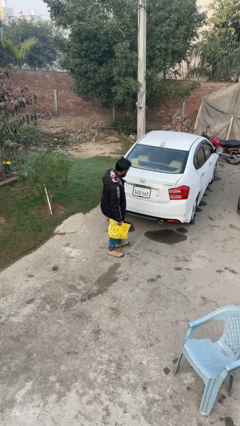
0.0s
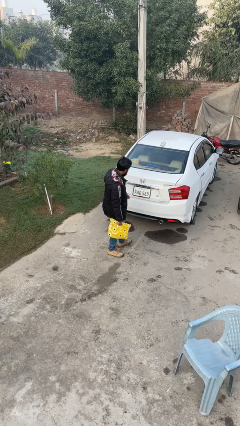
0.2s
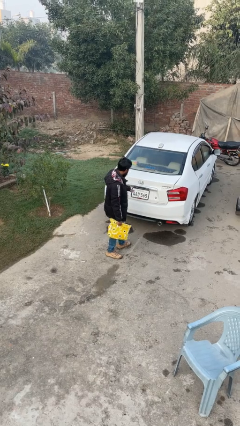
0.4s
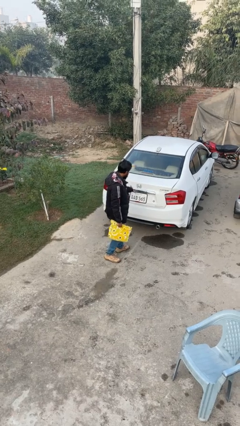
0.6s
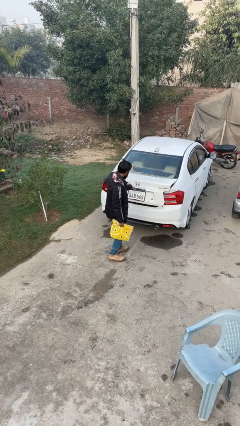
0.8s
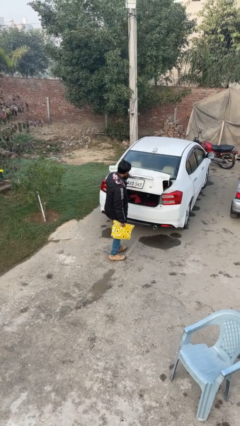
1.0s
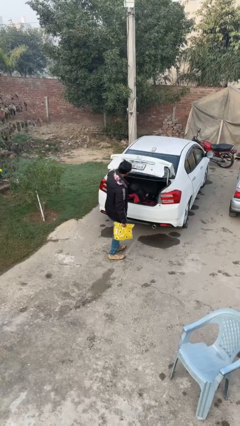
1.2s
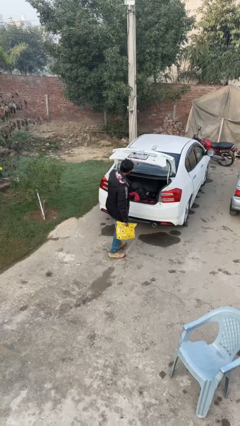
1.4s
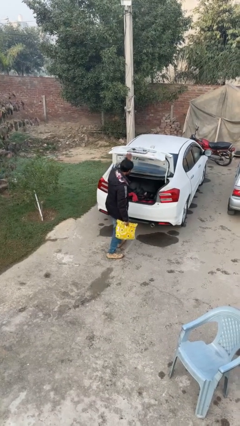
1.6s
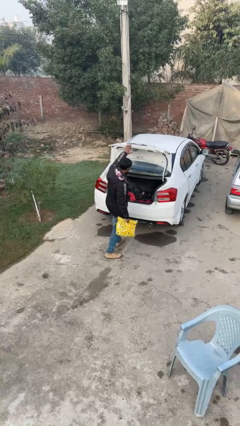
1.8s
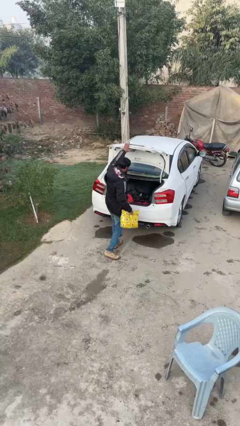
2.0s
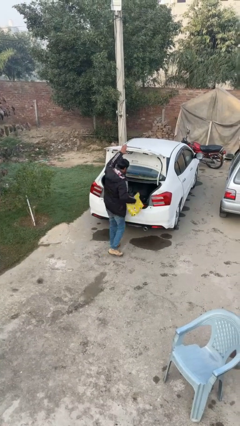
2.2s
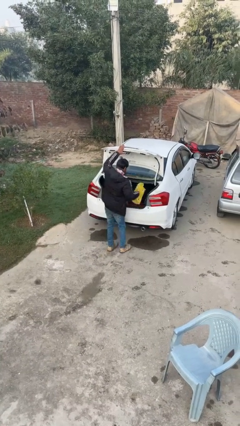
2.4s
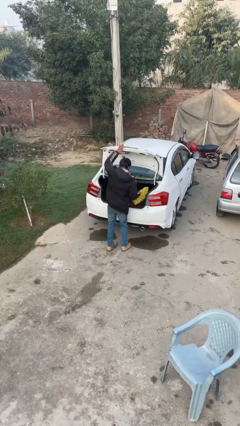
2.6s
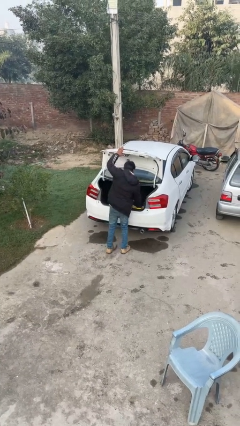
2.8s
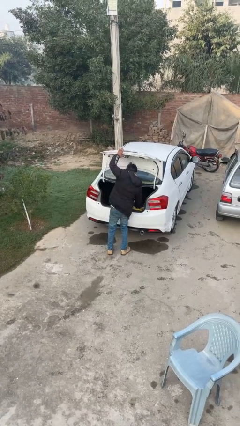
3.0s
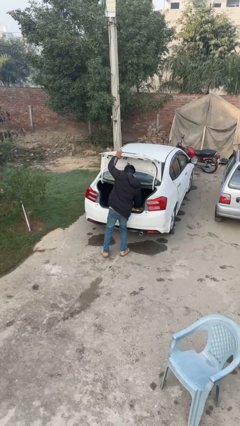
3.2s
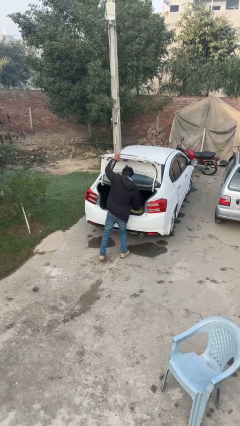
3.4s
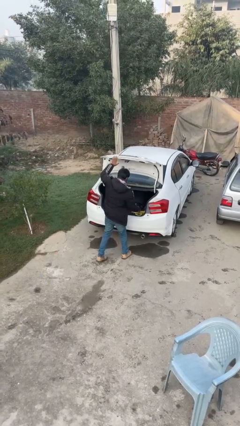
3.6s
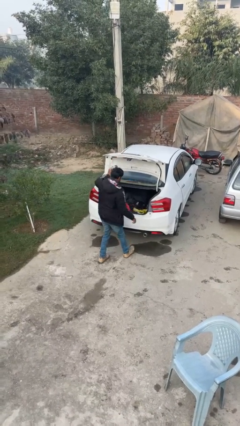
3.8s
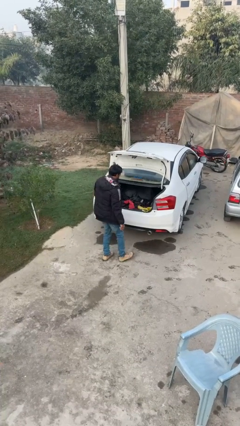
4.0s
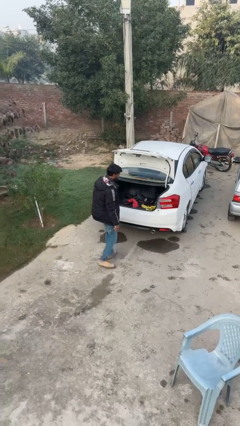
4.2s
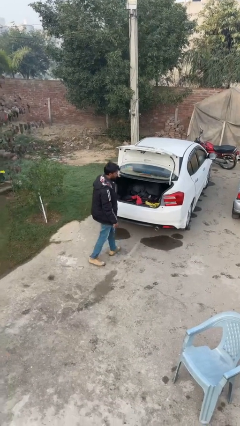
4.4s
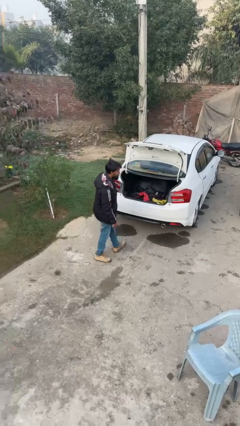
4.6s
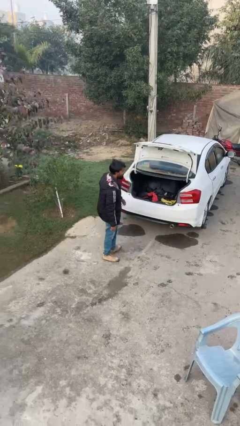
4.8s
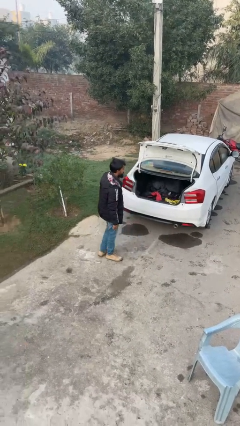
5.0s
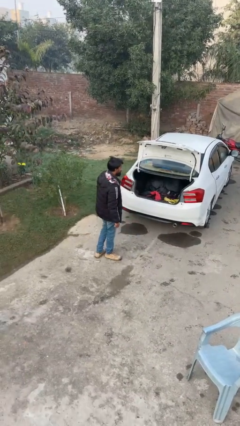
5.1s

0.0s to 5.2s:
person loads car

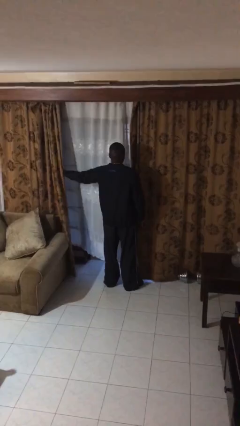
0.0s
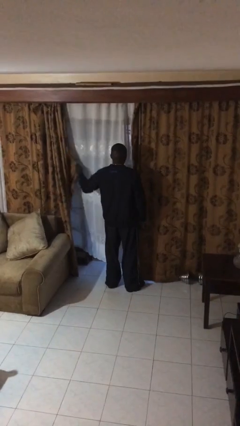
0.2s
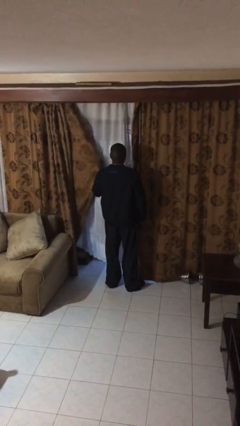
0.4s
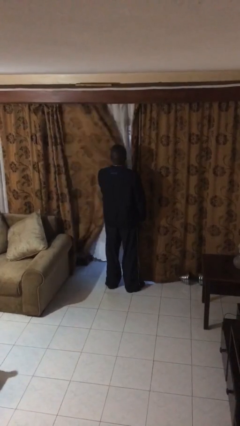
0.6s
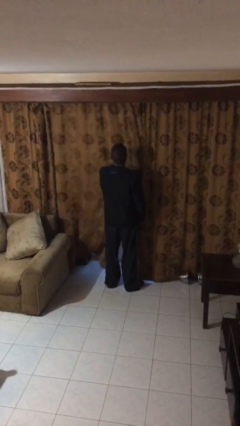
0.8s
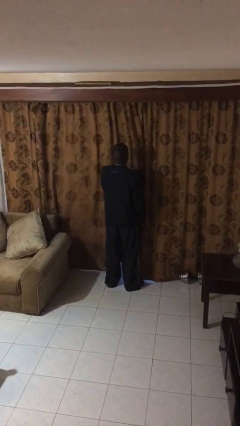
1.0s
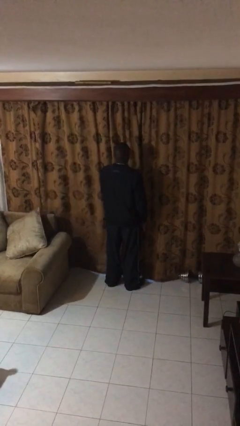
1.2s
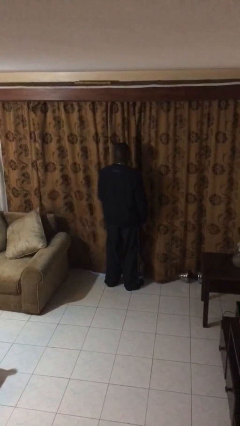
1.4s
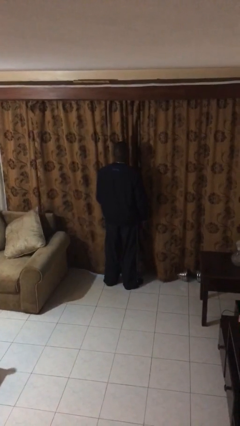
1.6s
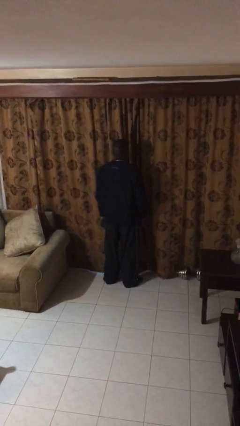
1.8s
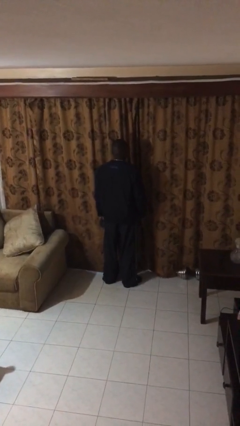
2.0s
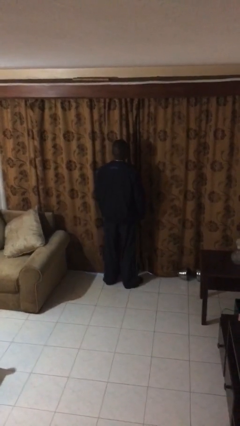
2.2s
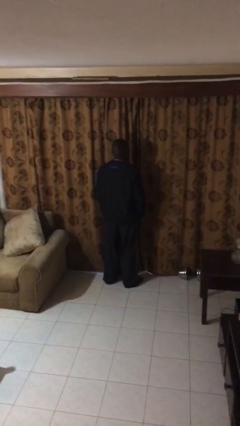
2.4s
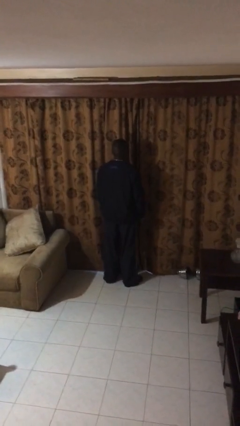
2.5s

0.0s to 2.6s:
person closes curtains

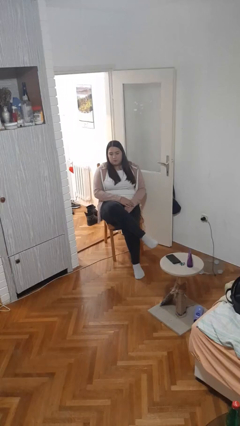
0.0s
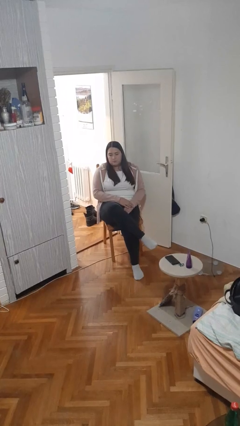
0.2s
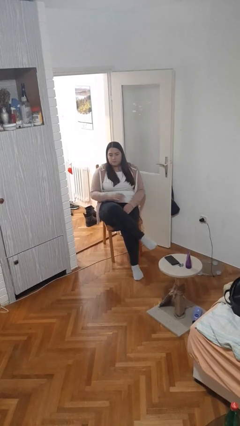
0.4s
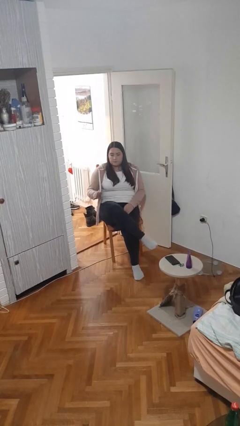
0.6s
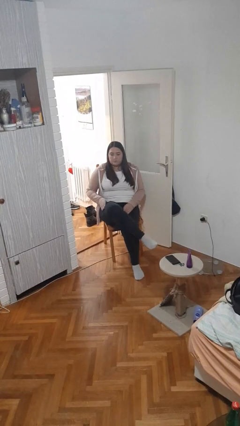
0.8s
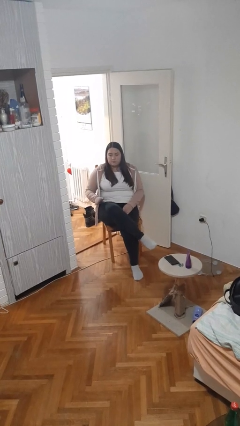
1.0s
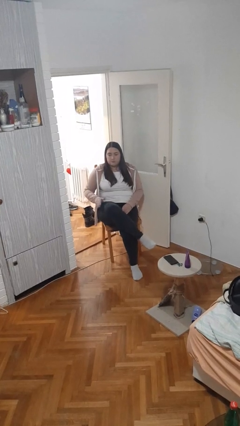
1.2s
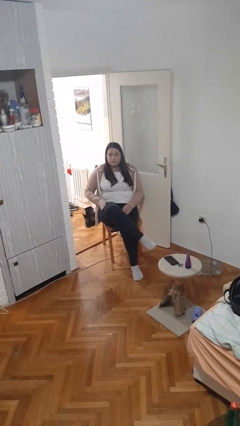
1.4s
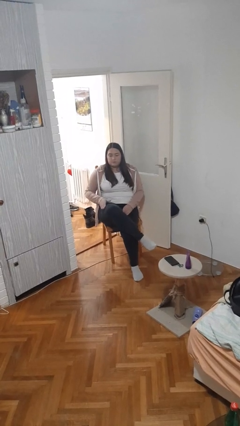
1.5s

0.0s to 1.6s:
person slaps hands on thighs

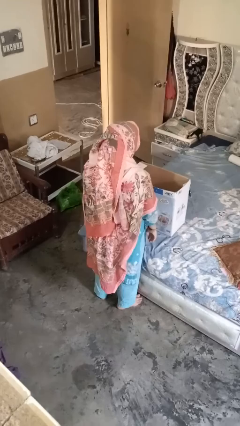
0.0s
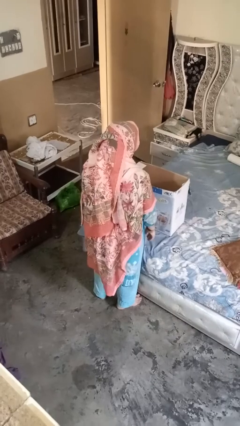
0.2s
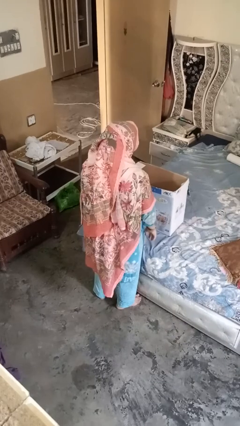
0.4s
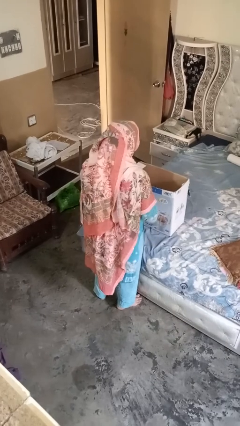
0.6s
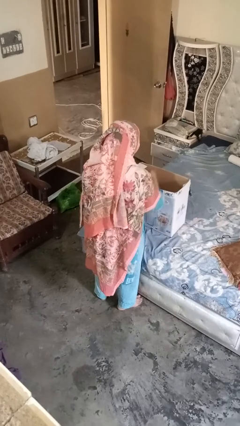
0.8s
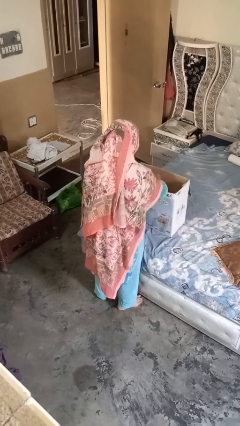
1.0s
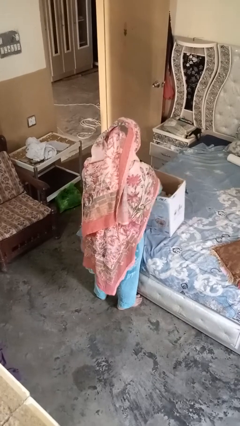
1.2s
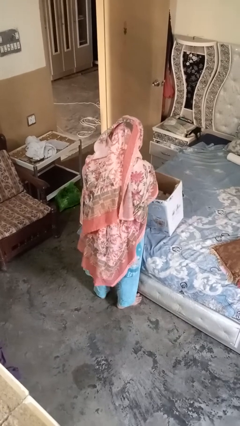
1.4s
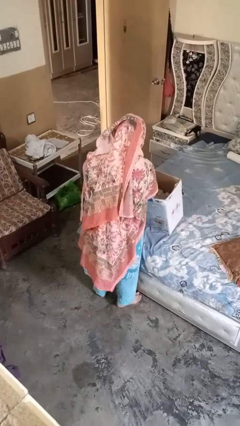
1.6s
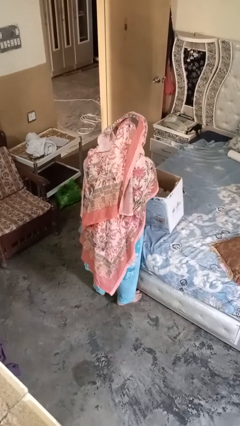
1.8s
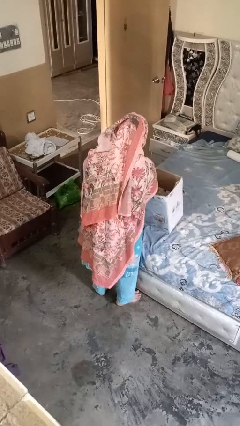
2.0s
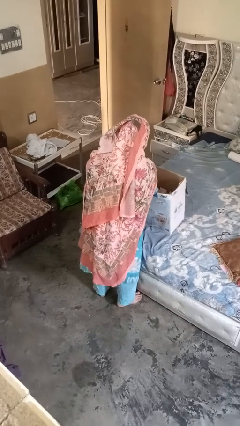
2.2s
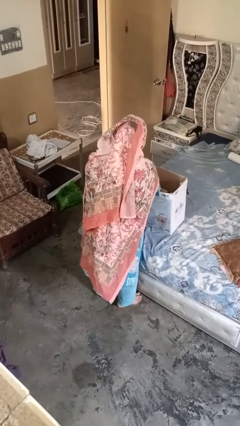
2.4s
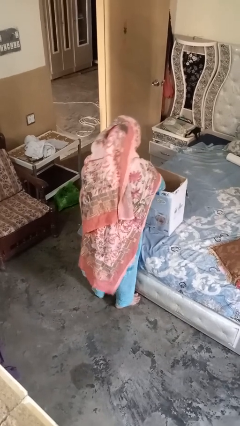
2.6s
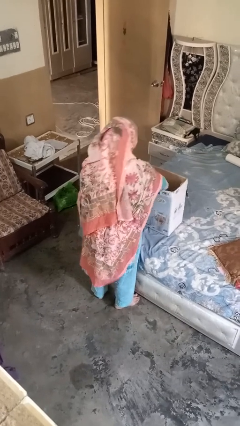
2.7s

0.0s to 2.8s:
person searches in box

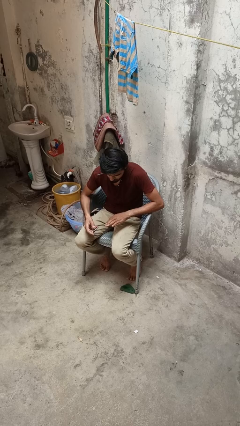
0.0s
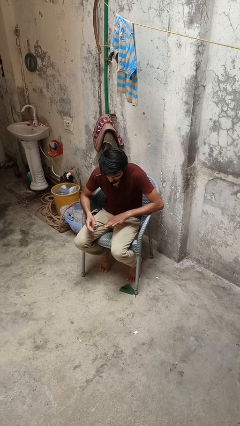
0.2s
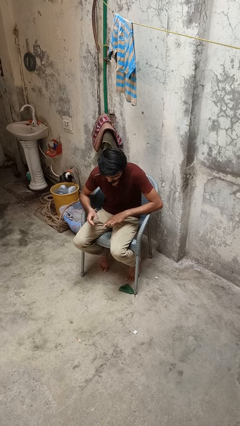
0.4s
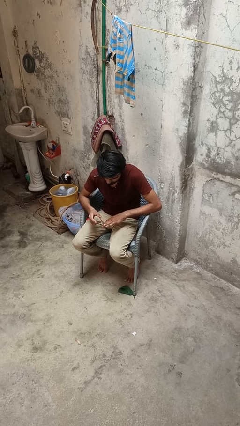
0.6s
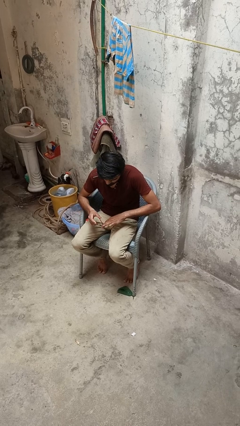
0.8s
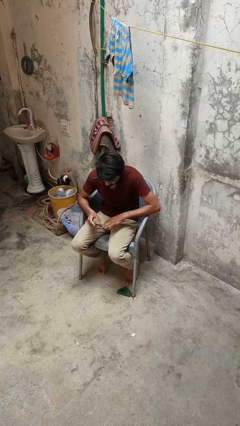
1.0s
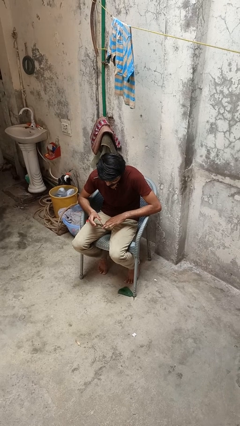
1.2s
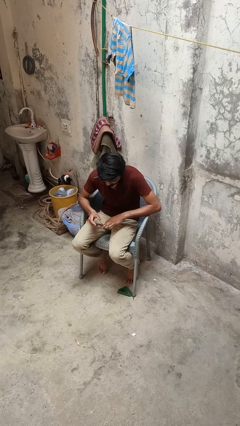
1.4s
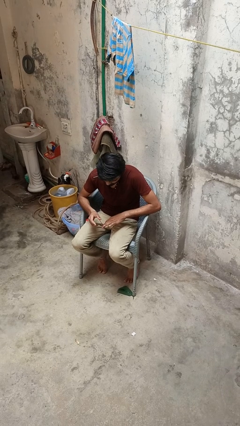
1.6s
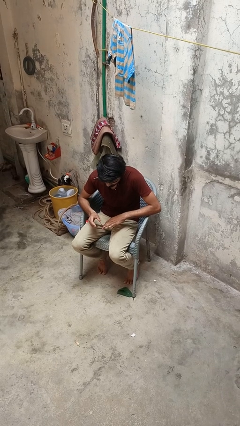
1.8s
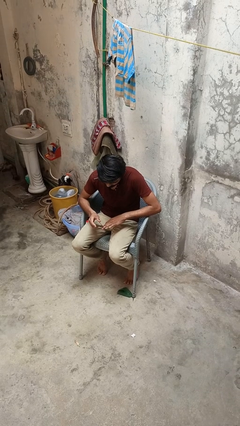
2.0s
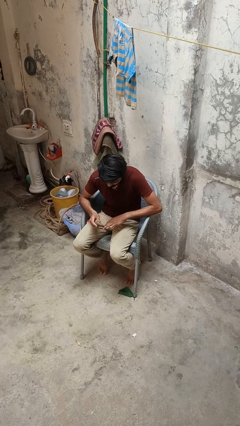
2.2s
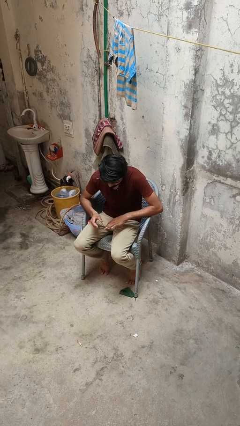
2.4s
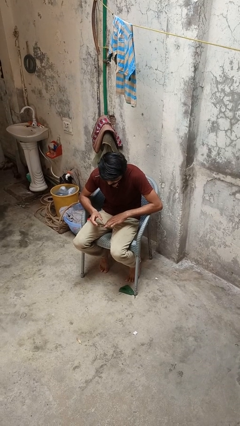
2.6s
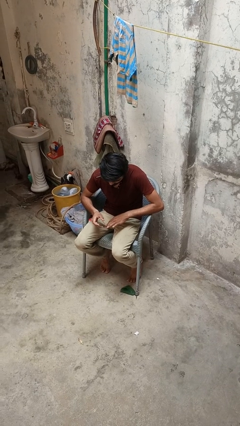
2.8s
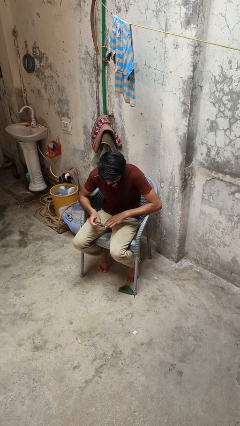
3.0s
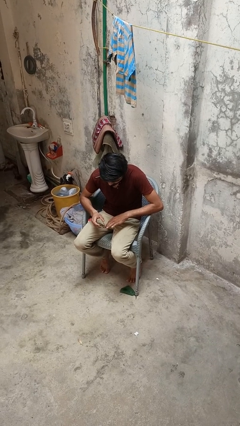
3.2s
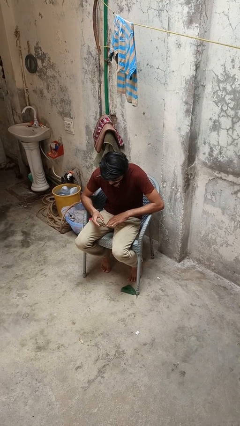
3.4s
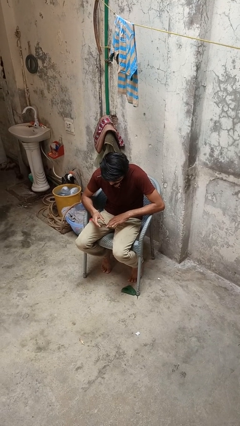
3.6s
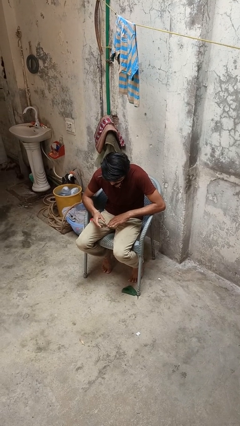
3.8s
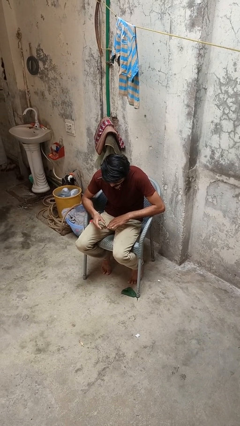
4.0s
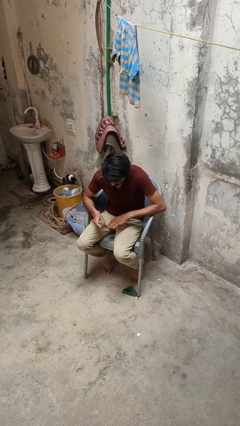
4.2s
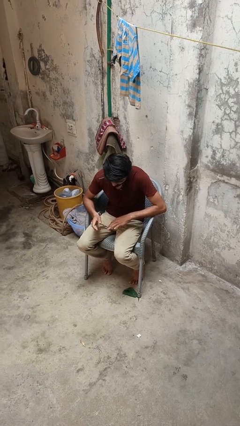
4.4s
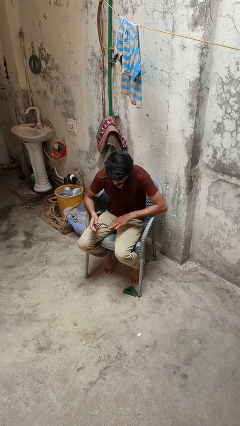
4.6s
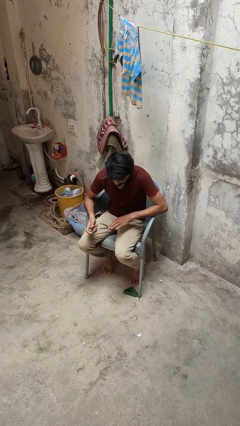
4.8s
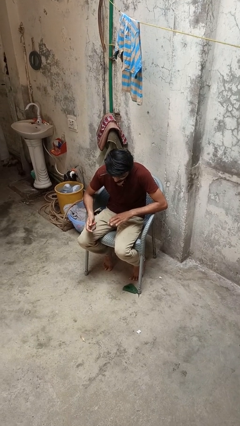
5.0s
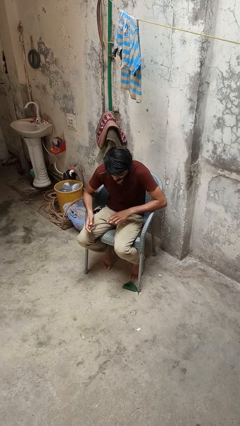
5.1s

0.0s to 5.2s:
person clips fingernails
